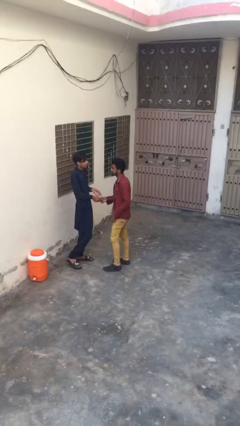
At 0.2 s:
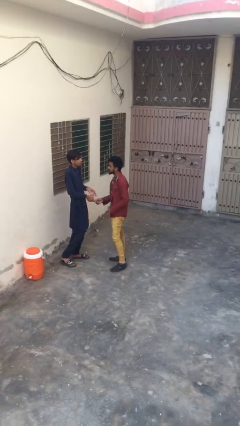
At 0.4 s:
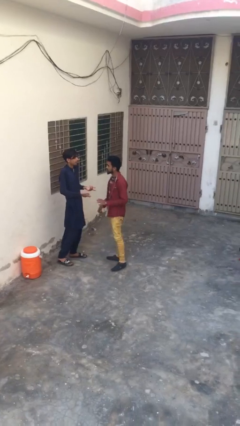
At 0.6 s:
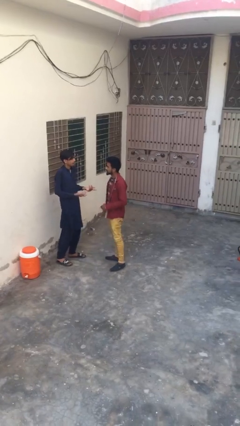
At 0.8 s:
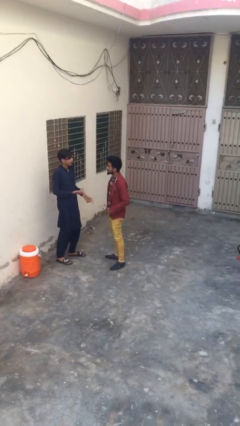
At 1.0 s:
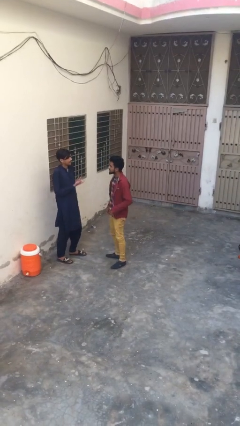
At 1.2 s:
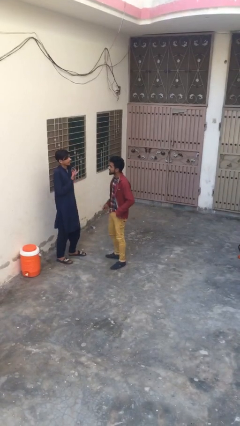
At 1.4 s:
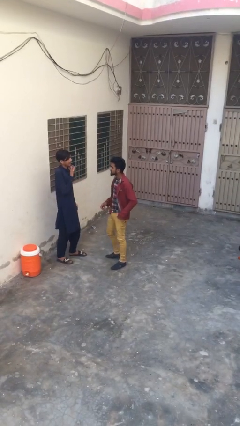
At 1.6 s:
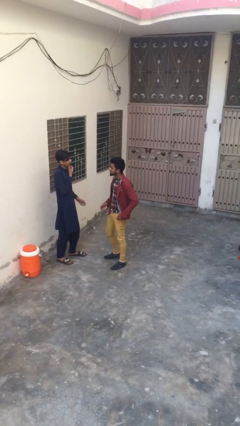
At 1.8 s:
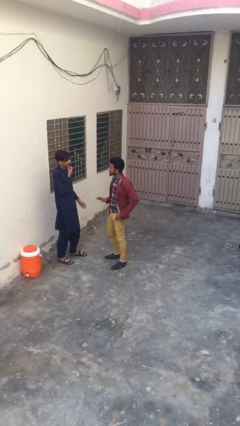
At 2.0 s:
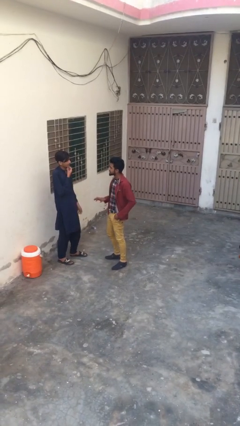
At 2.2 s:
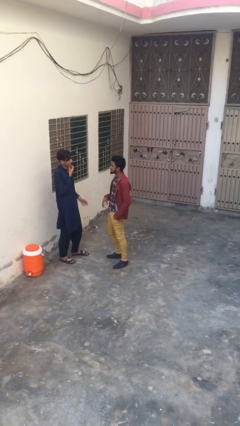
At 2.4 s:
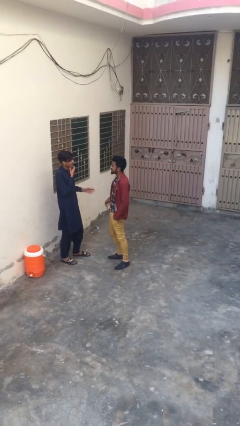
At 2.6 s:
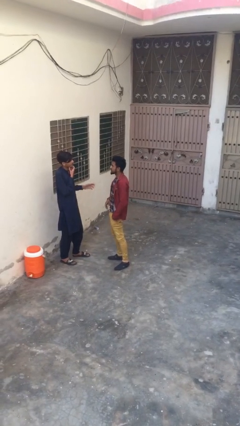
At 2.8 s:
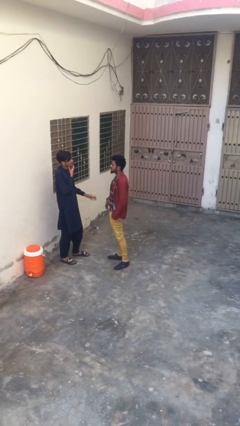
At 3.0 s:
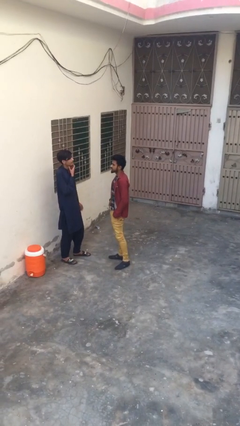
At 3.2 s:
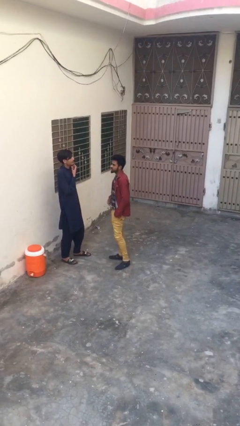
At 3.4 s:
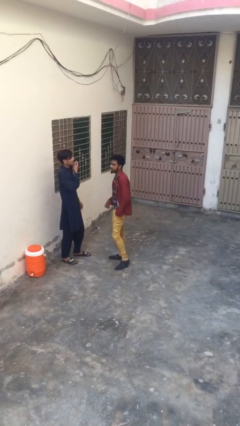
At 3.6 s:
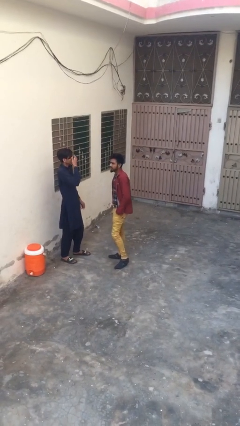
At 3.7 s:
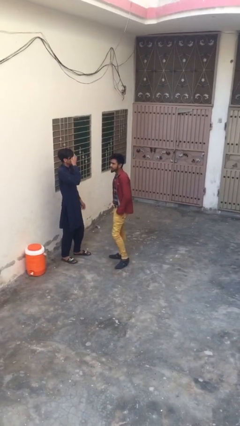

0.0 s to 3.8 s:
person talks to person

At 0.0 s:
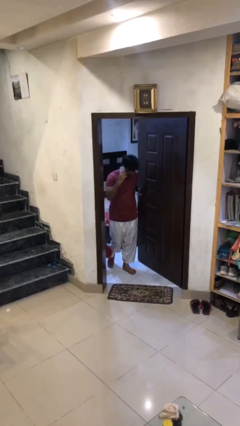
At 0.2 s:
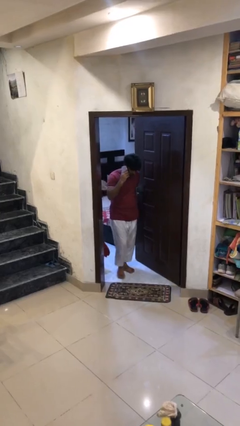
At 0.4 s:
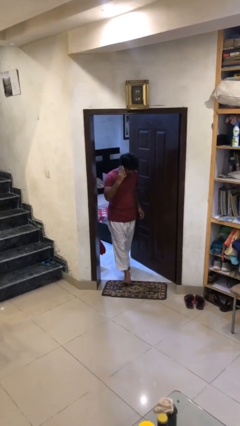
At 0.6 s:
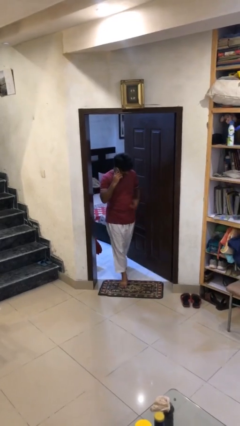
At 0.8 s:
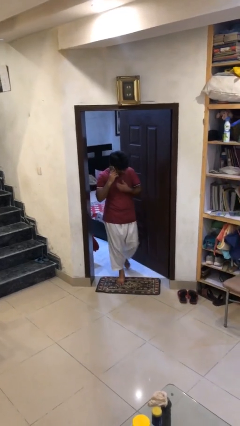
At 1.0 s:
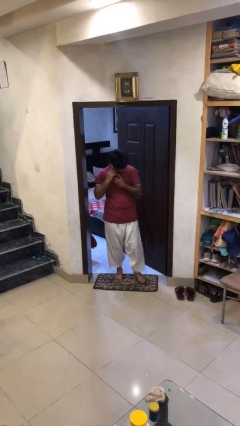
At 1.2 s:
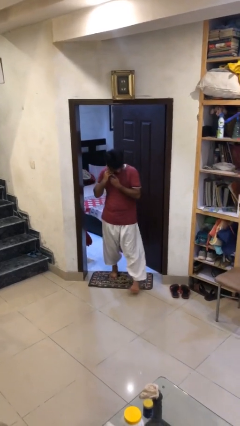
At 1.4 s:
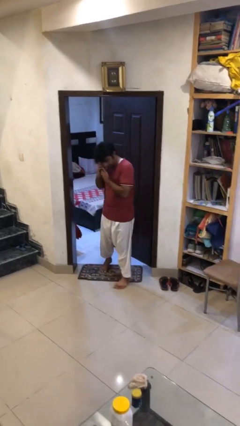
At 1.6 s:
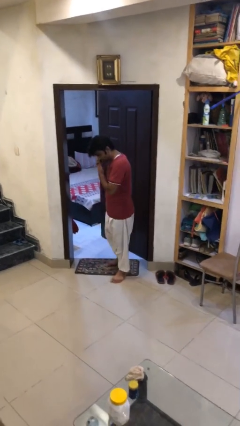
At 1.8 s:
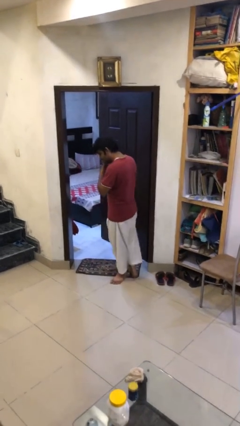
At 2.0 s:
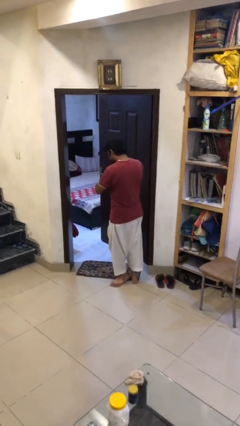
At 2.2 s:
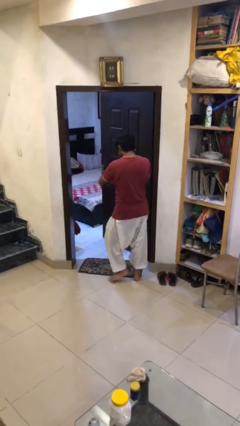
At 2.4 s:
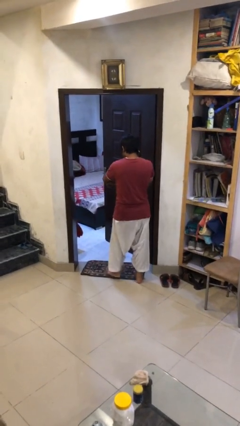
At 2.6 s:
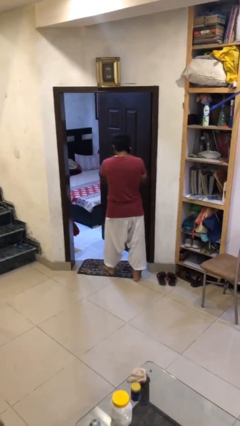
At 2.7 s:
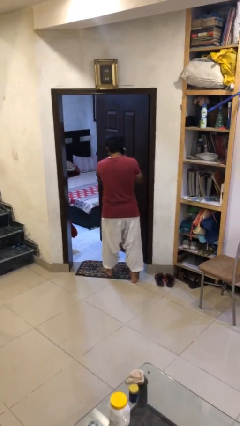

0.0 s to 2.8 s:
person enters scene through structure

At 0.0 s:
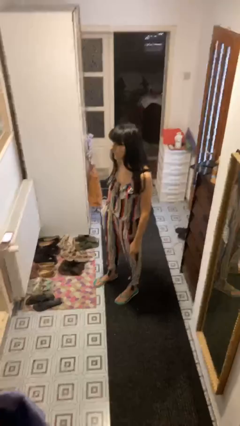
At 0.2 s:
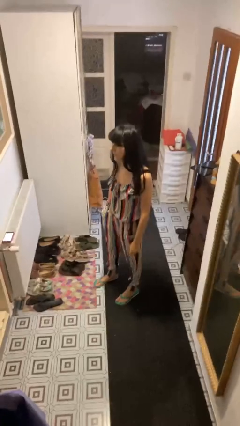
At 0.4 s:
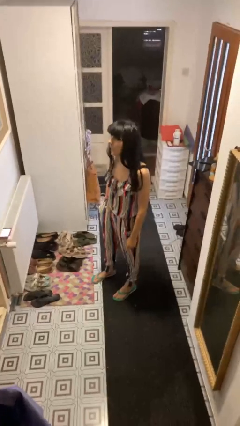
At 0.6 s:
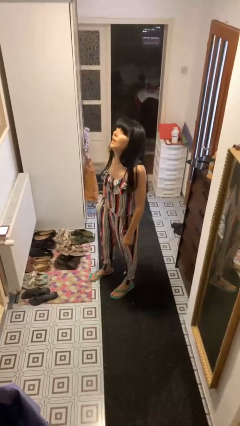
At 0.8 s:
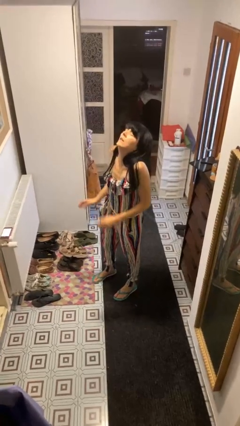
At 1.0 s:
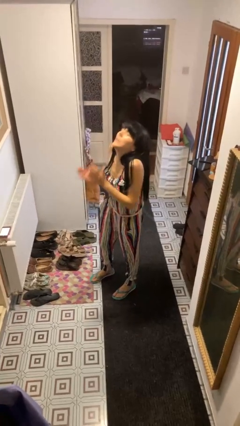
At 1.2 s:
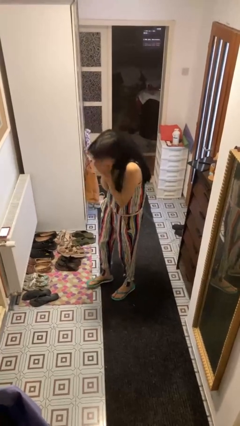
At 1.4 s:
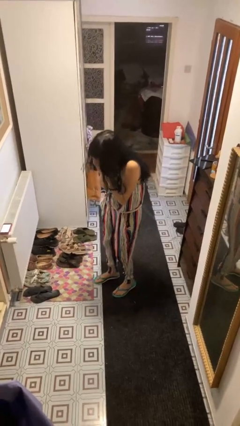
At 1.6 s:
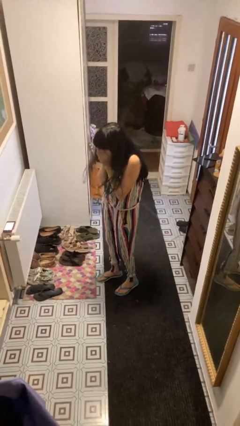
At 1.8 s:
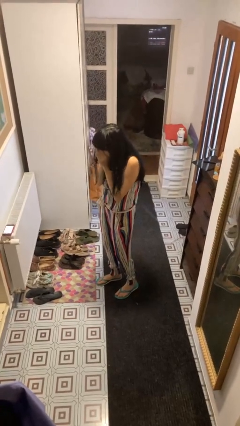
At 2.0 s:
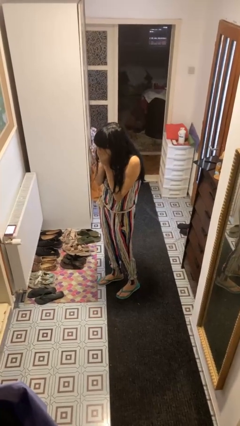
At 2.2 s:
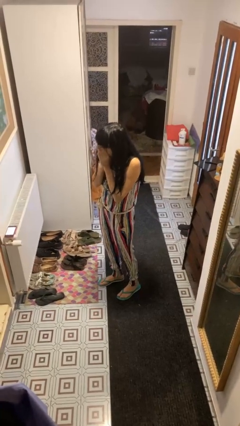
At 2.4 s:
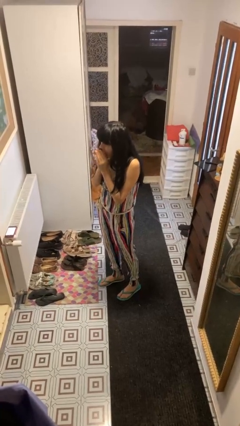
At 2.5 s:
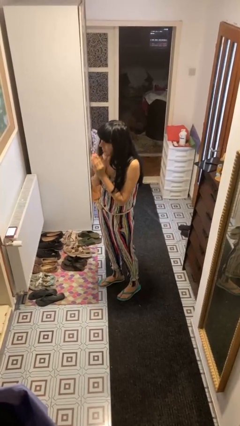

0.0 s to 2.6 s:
person sneezes into hand

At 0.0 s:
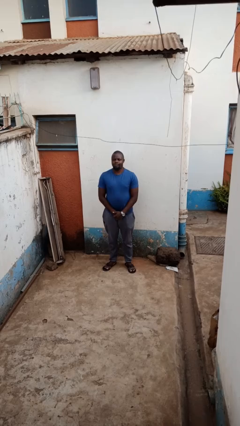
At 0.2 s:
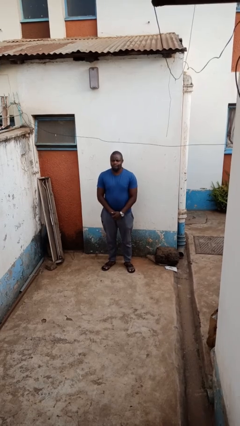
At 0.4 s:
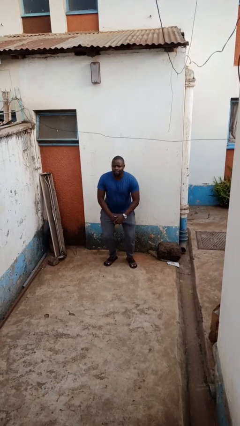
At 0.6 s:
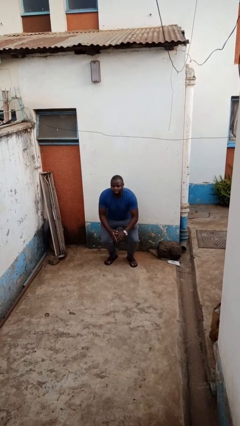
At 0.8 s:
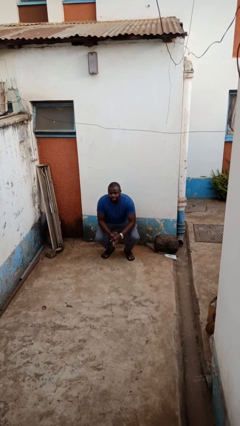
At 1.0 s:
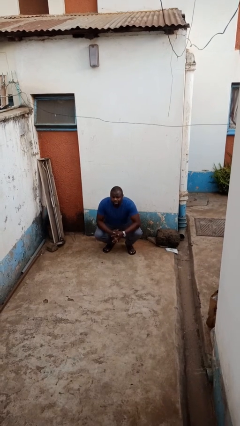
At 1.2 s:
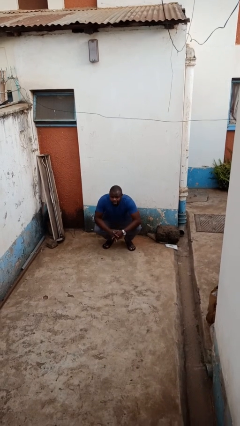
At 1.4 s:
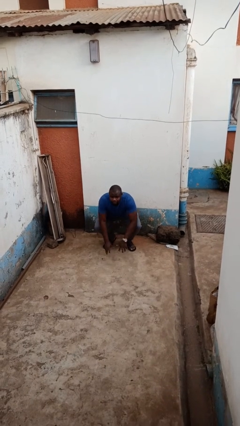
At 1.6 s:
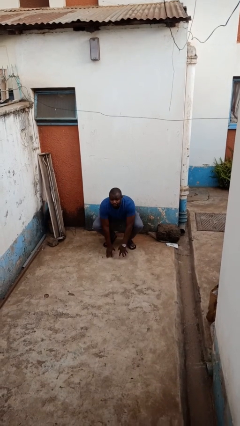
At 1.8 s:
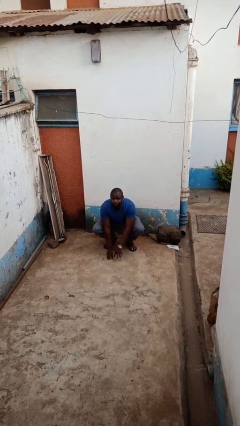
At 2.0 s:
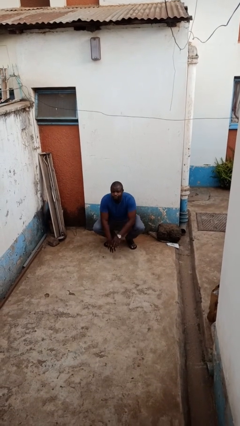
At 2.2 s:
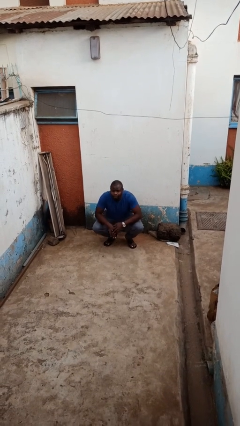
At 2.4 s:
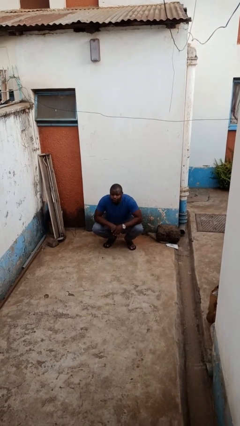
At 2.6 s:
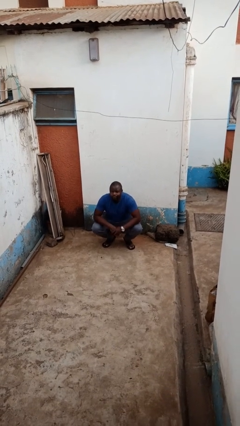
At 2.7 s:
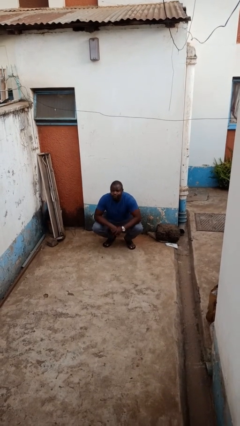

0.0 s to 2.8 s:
person squats

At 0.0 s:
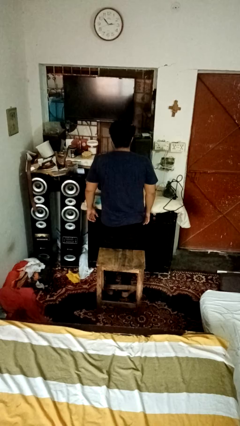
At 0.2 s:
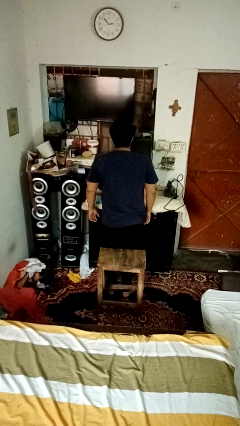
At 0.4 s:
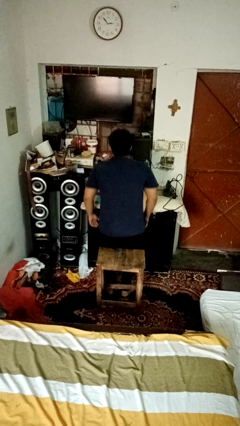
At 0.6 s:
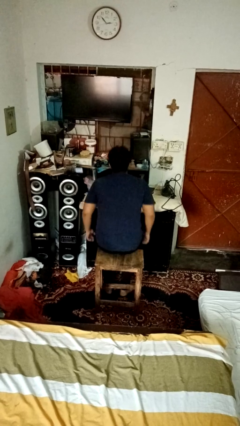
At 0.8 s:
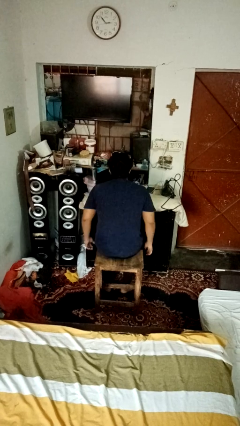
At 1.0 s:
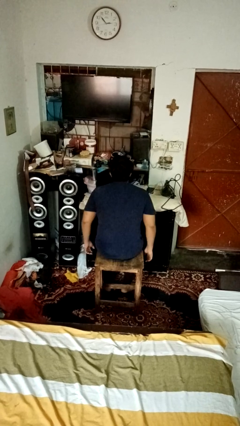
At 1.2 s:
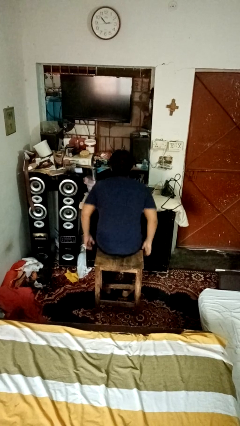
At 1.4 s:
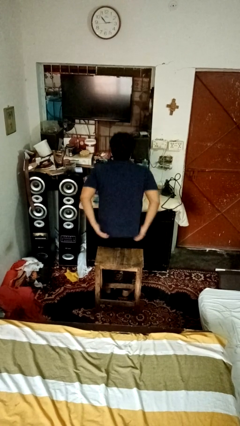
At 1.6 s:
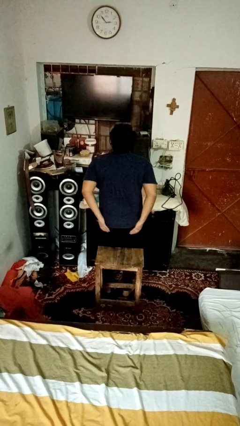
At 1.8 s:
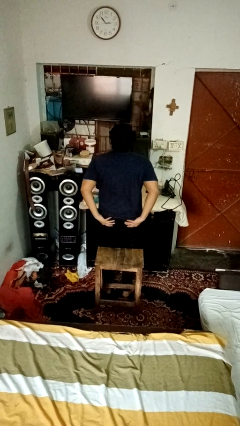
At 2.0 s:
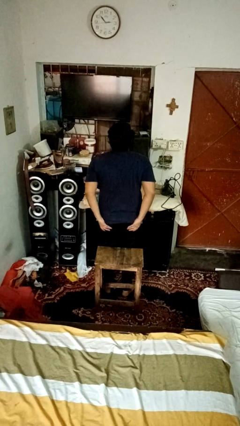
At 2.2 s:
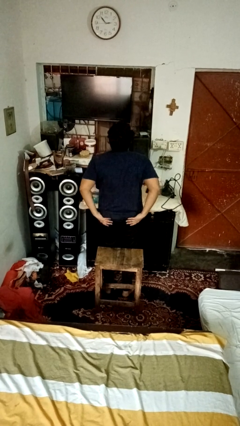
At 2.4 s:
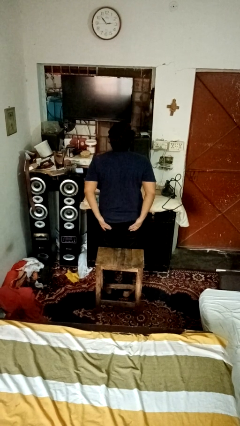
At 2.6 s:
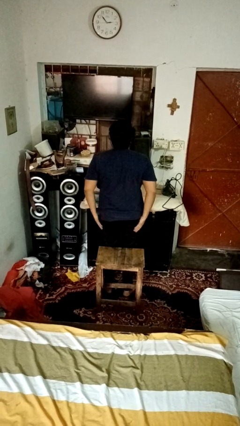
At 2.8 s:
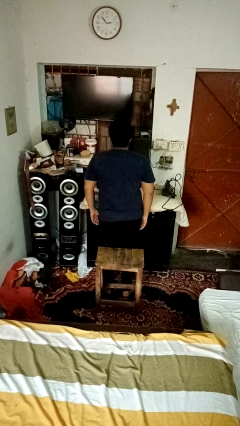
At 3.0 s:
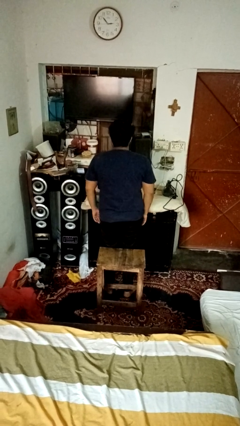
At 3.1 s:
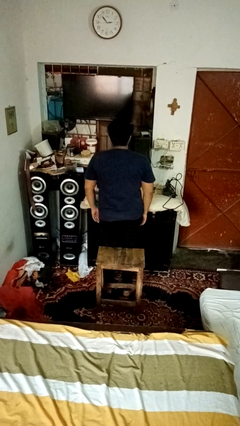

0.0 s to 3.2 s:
person bumps into table

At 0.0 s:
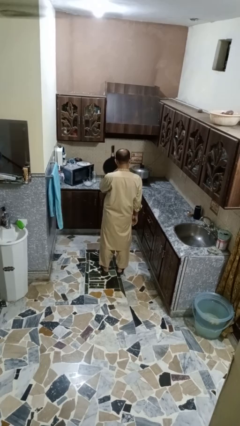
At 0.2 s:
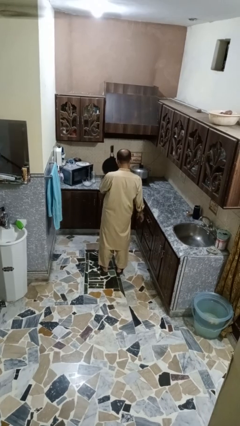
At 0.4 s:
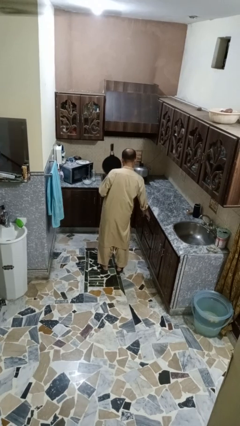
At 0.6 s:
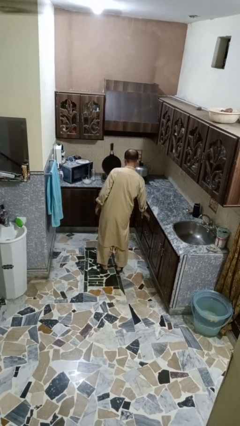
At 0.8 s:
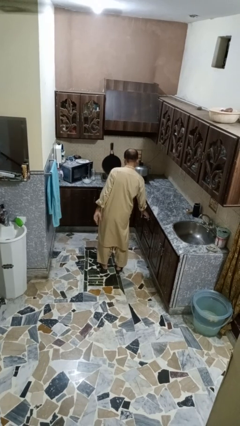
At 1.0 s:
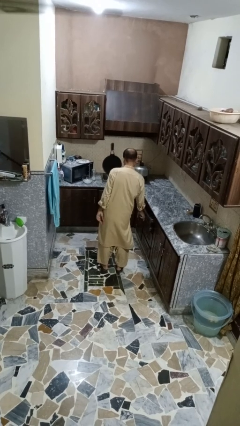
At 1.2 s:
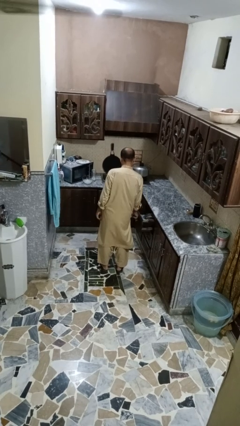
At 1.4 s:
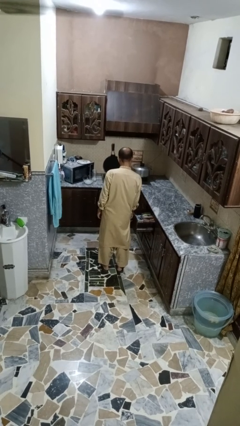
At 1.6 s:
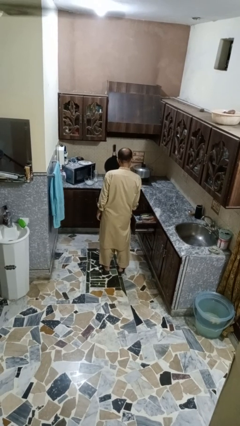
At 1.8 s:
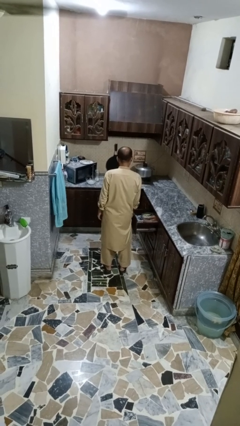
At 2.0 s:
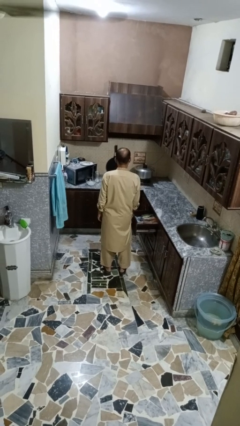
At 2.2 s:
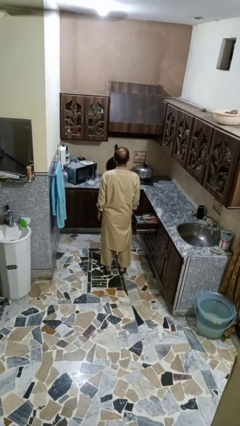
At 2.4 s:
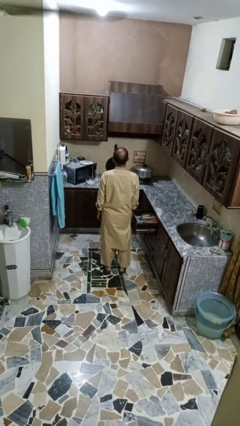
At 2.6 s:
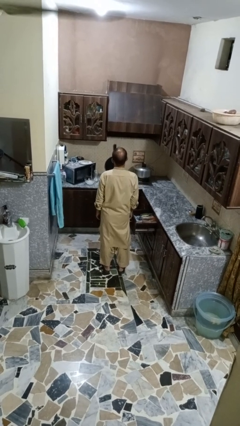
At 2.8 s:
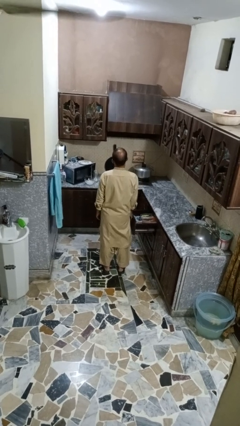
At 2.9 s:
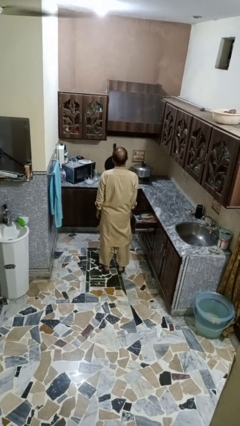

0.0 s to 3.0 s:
person opens kitchen drawer
